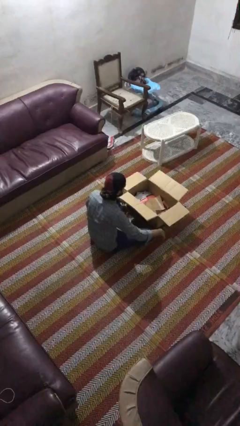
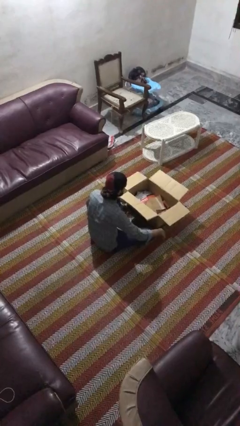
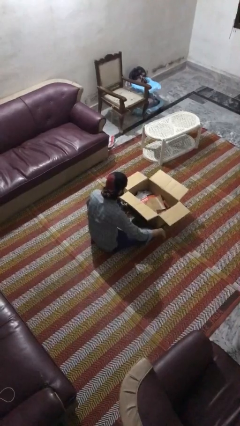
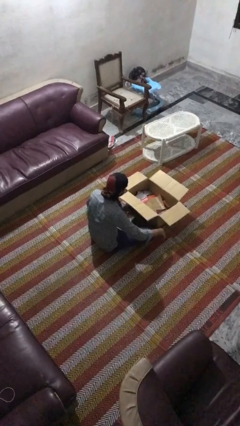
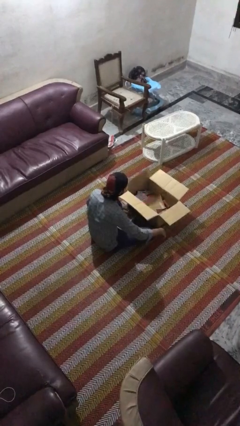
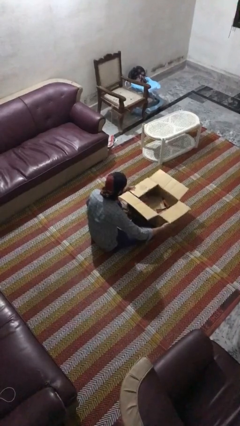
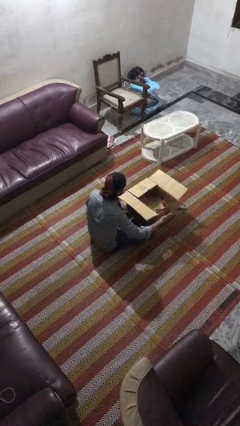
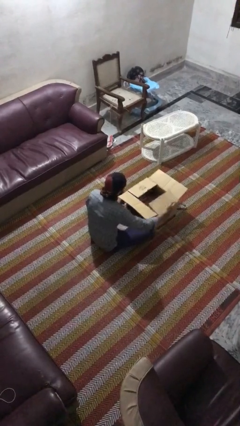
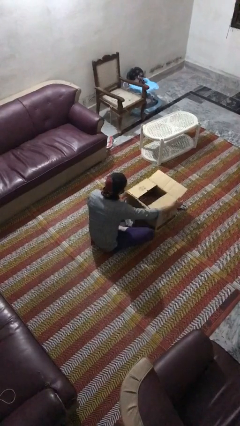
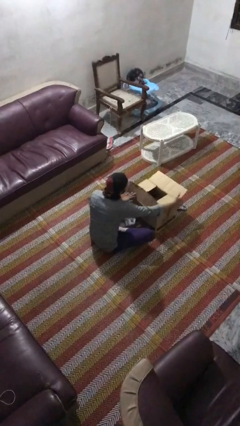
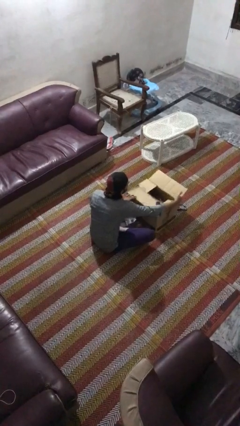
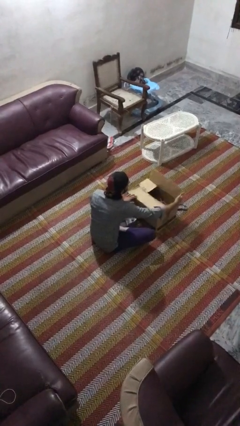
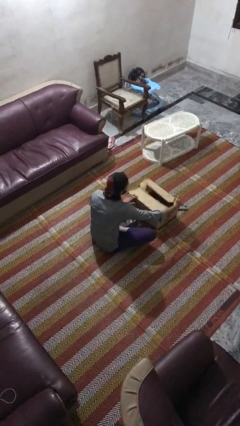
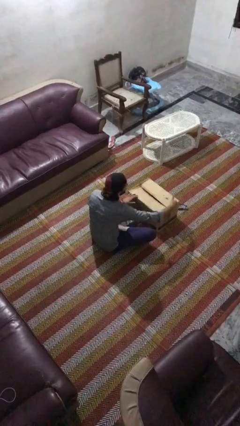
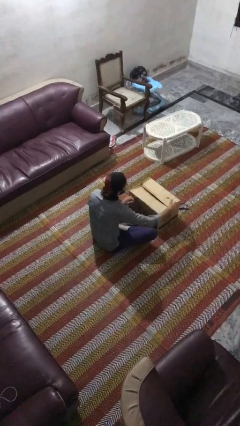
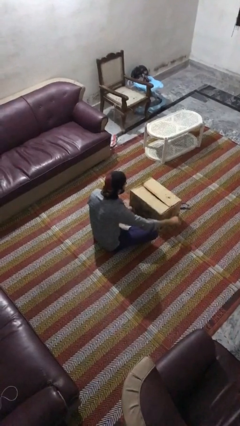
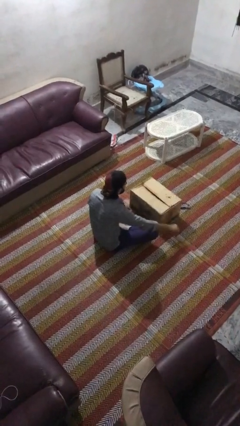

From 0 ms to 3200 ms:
person closes box

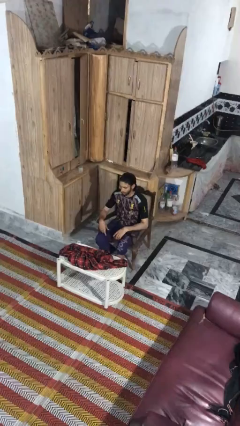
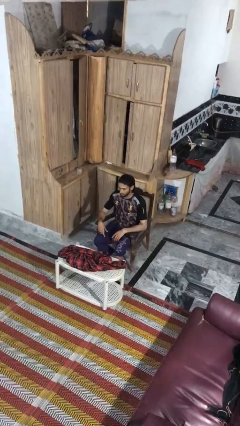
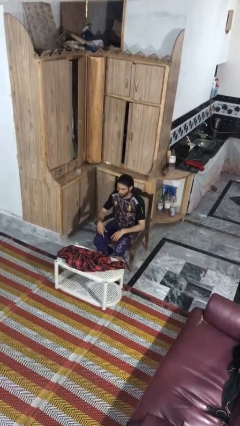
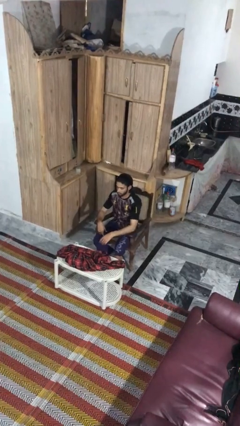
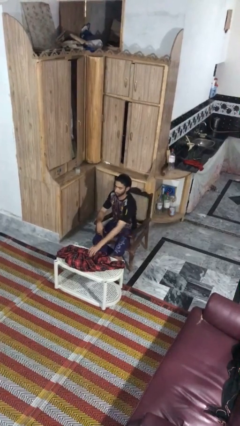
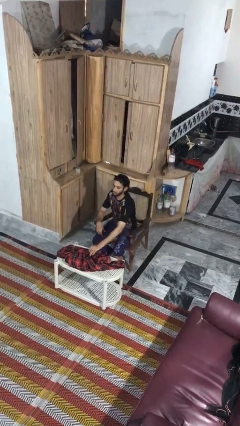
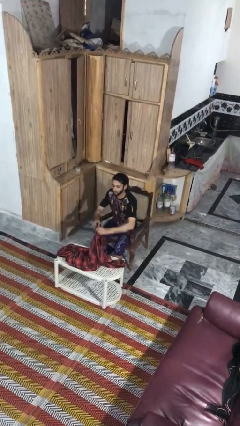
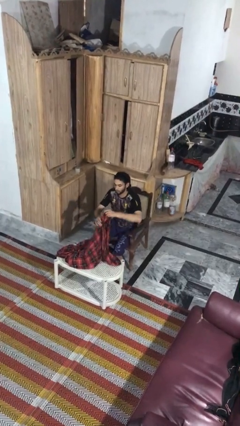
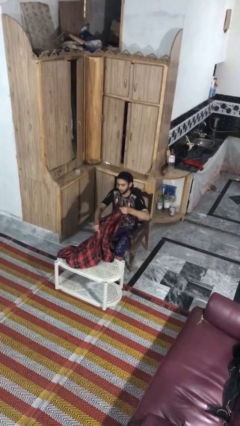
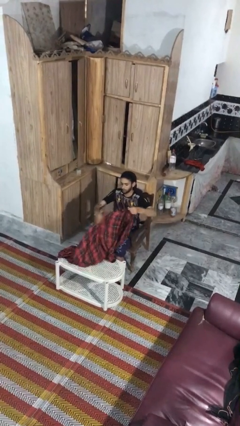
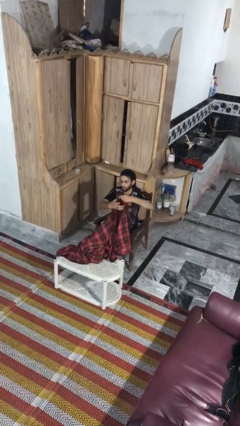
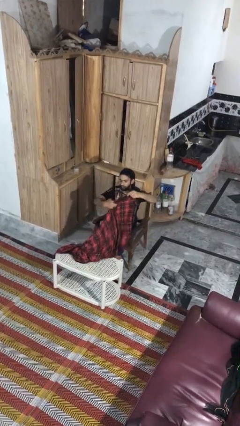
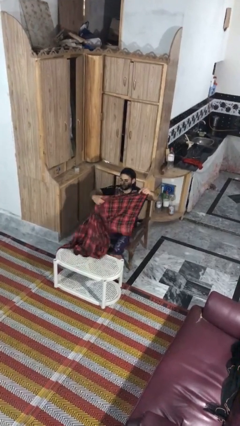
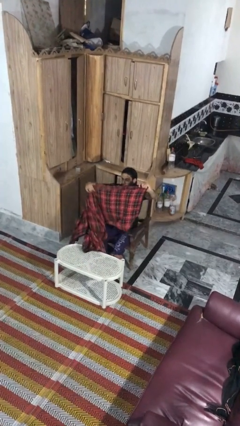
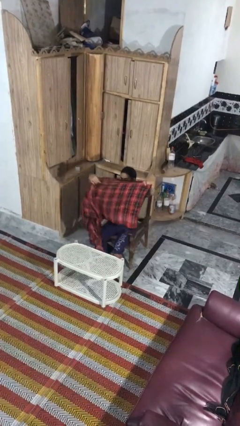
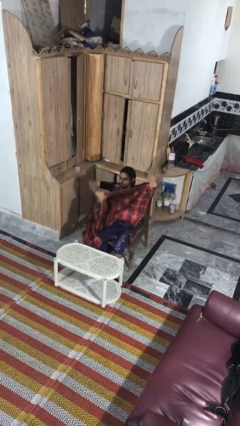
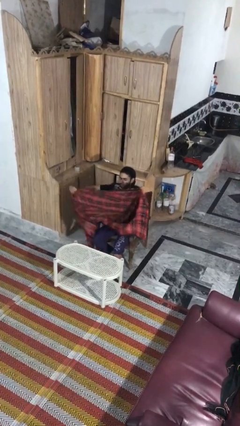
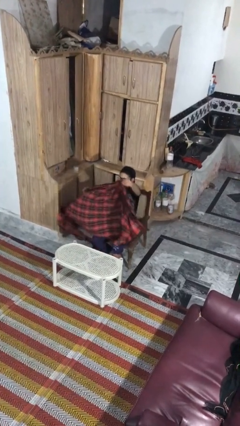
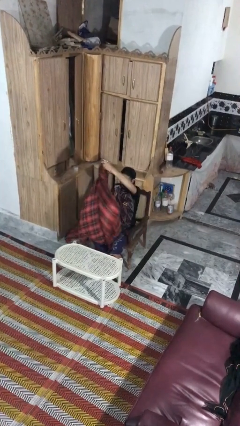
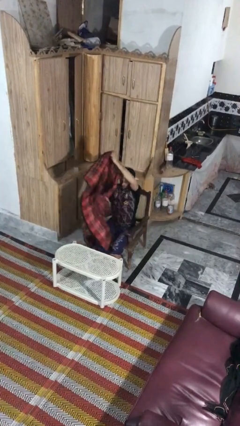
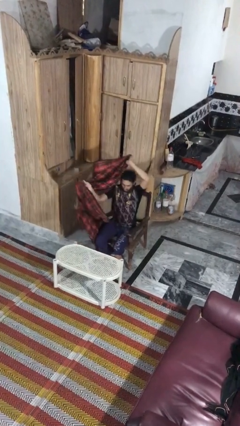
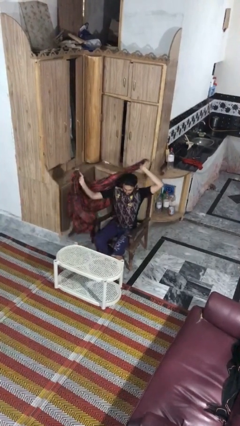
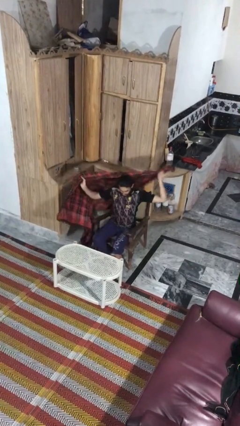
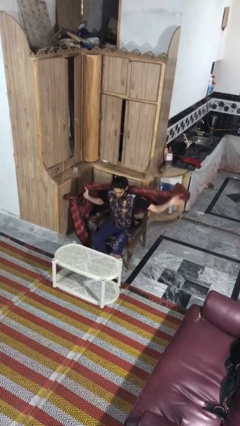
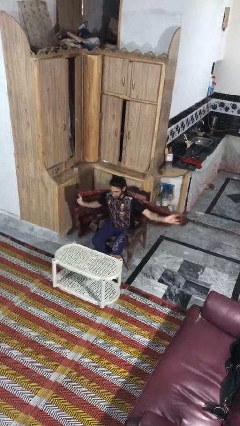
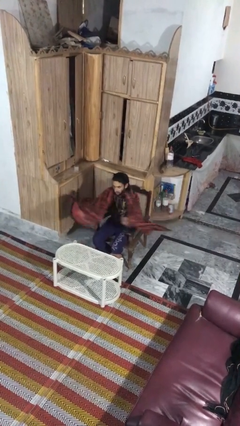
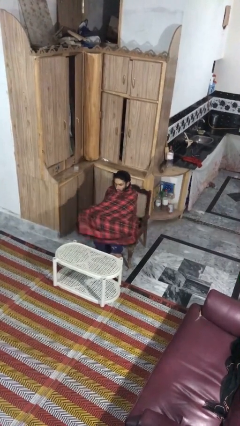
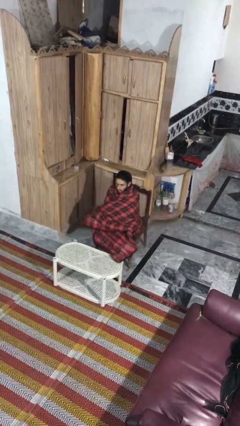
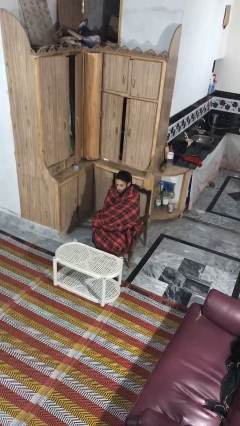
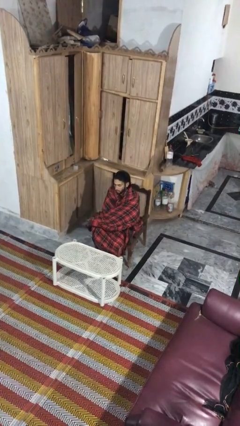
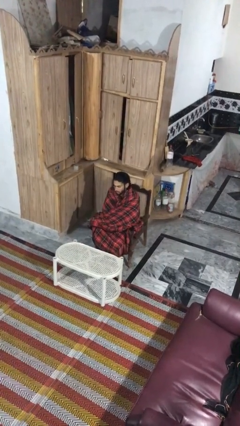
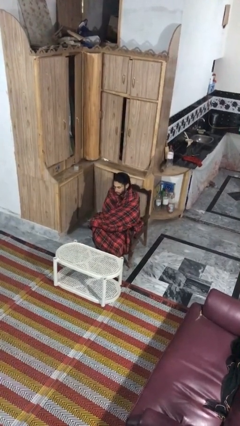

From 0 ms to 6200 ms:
person covers with blanket

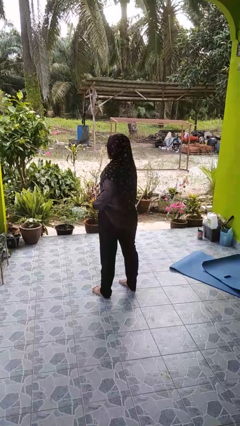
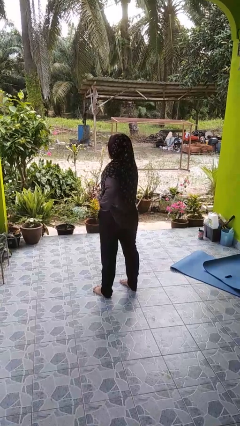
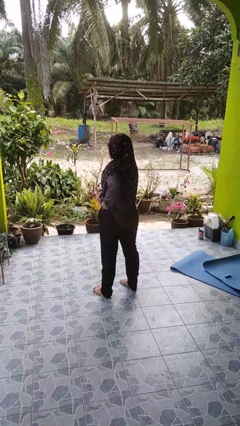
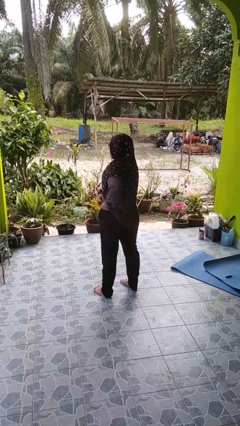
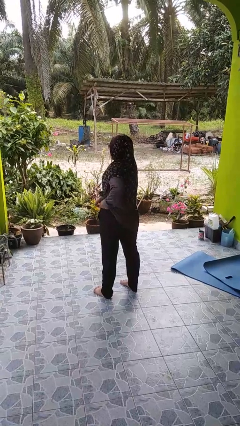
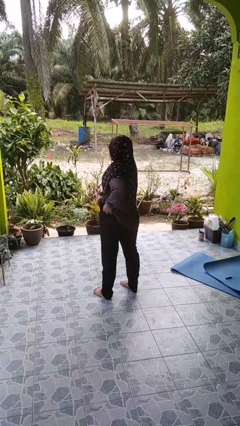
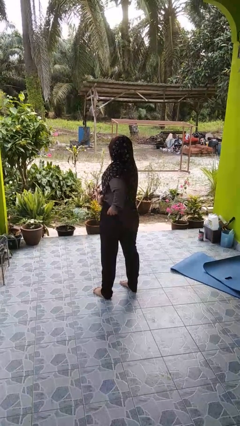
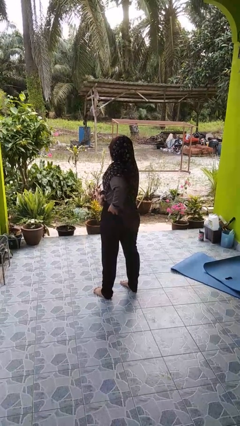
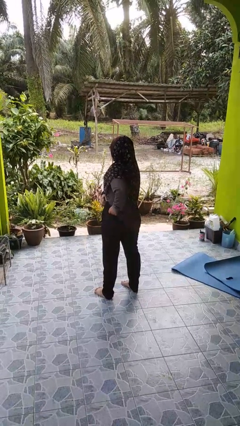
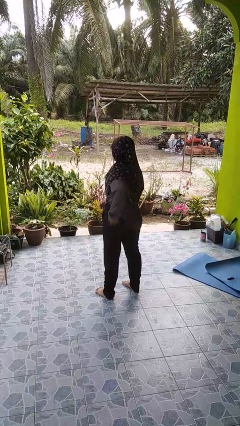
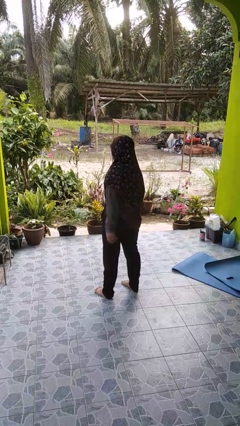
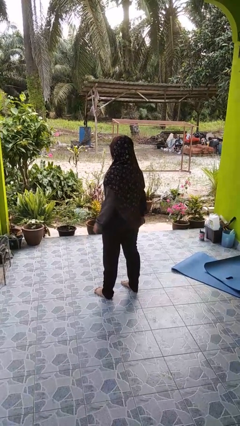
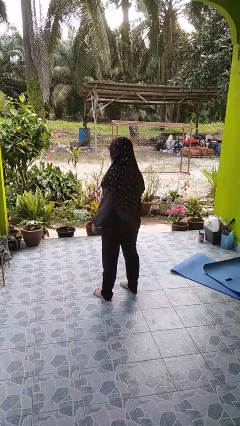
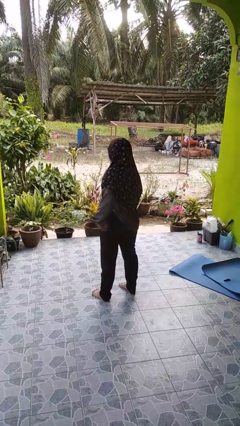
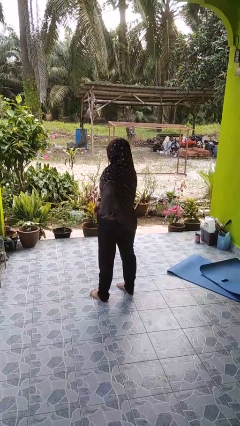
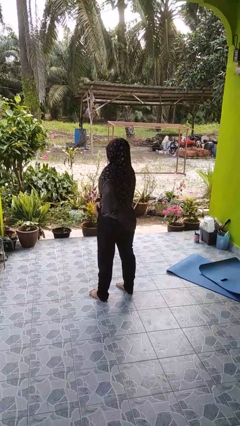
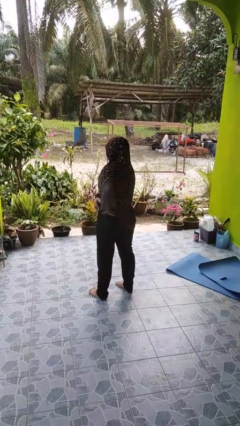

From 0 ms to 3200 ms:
person tucks in shirt

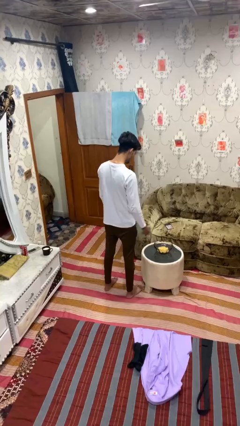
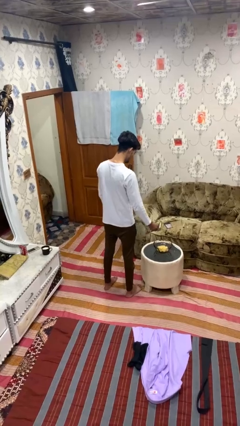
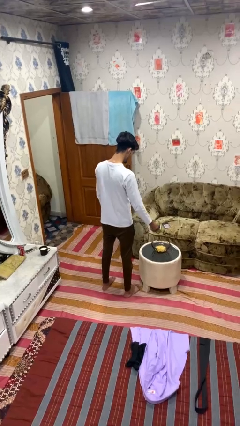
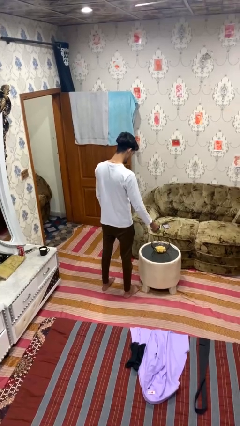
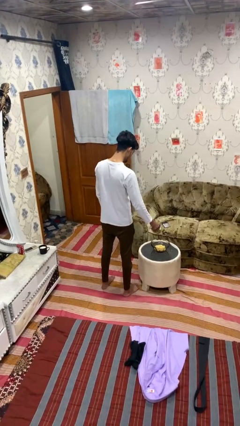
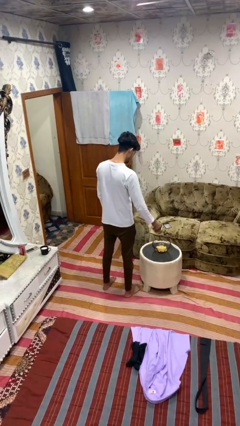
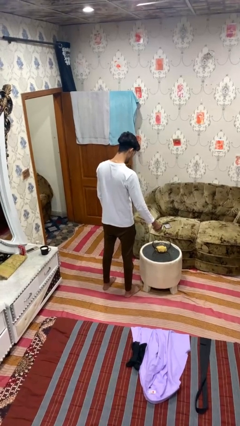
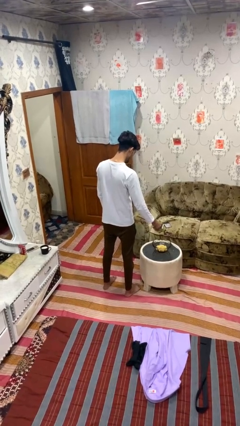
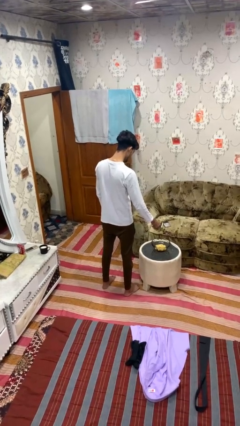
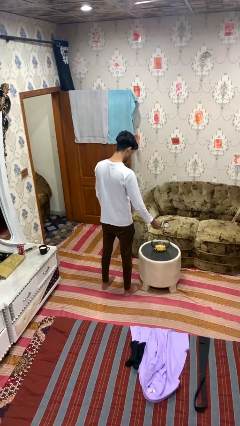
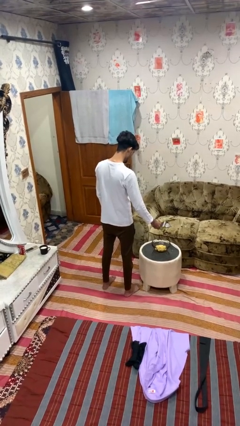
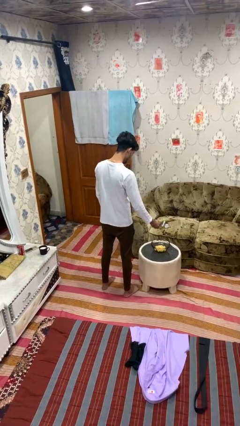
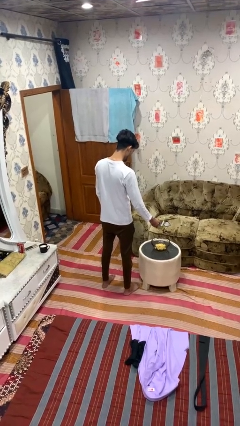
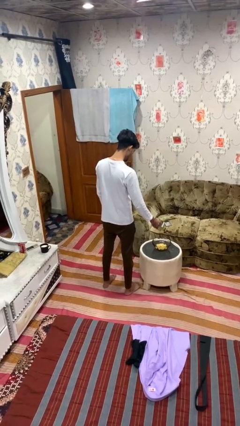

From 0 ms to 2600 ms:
person pours into bowl

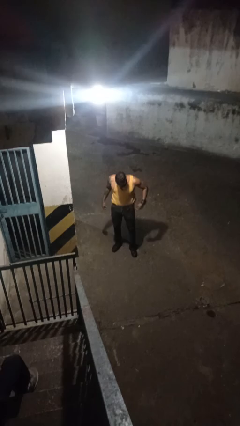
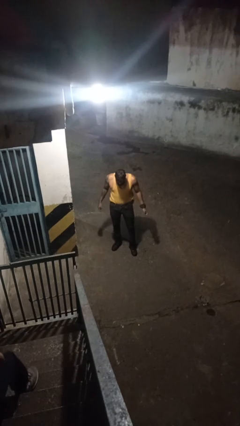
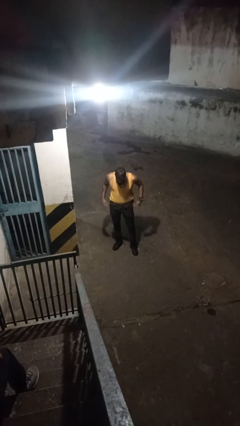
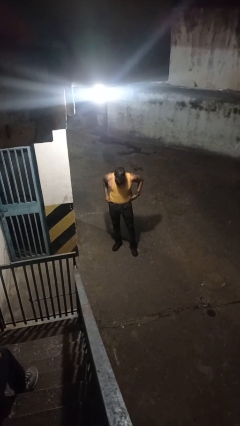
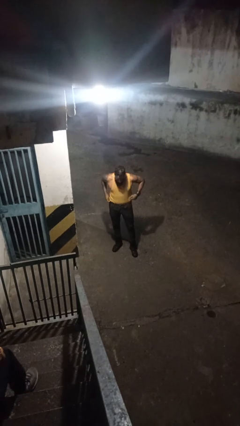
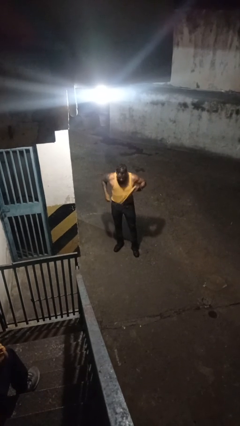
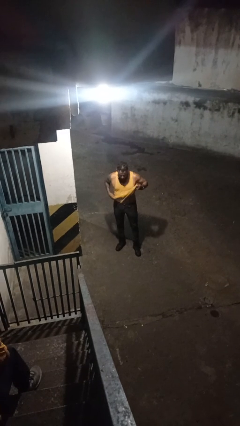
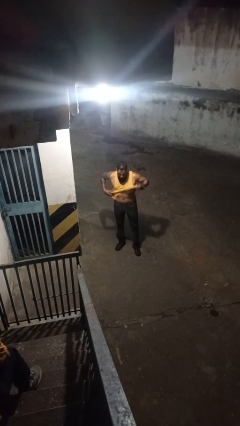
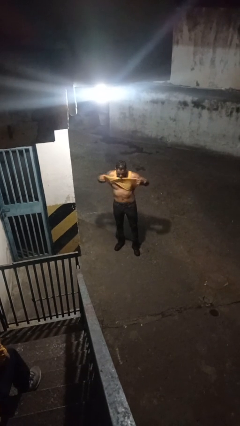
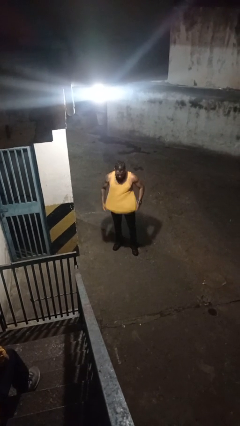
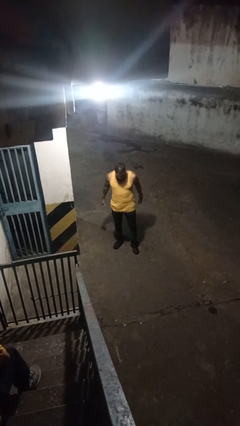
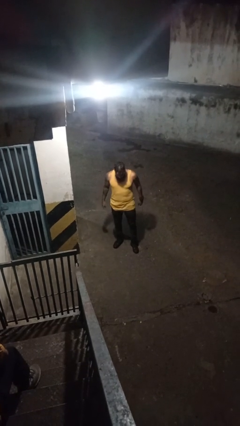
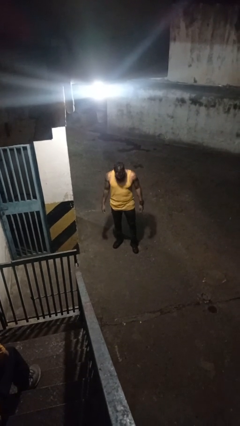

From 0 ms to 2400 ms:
person untucks shirt
